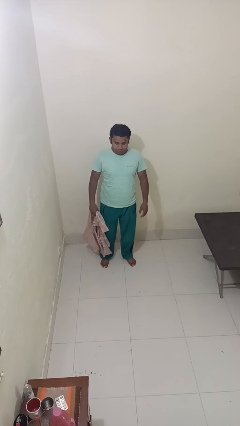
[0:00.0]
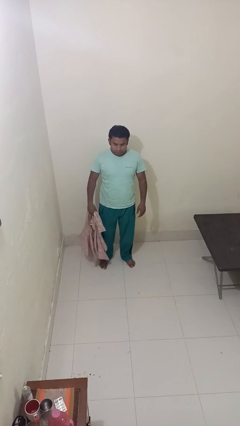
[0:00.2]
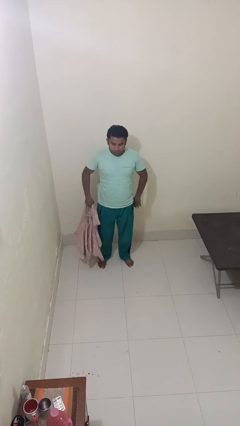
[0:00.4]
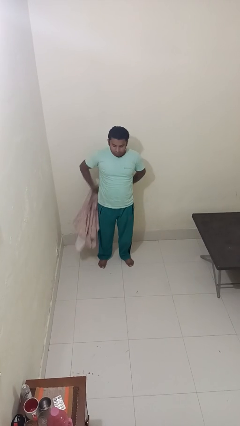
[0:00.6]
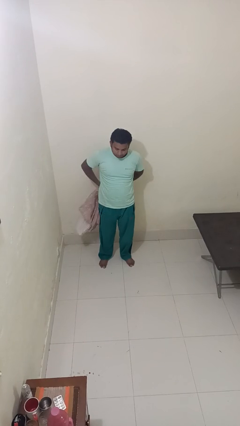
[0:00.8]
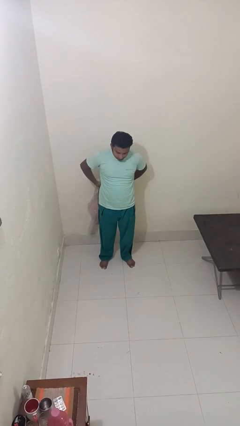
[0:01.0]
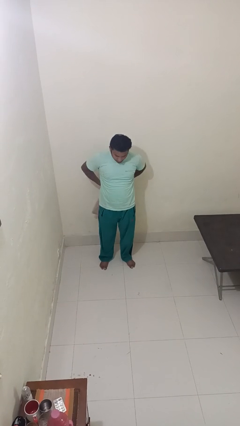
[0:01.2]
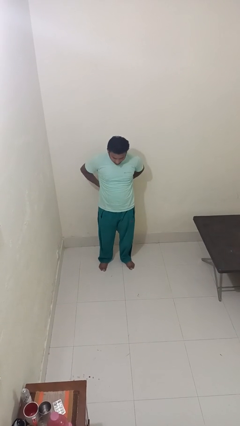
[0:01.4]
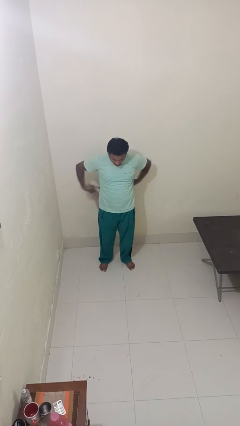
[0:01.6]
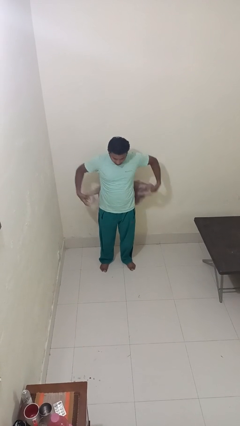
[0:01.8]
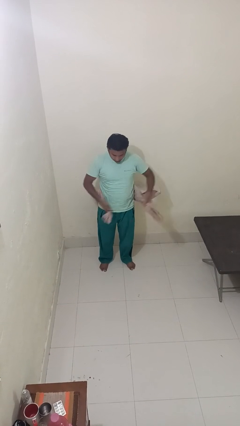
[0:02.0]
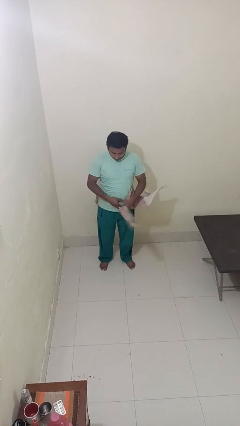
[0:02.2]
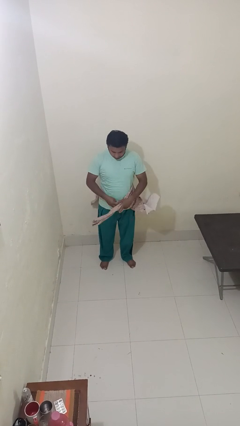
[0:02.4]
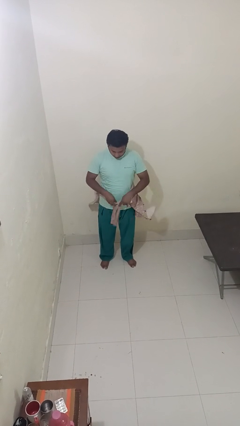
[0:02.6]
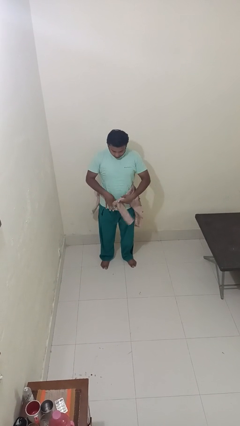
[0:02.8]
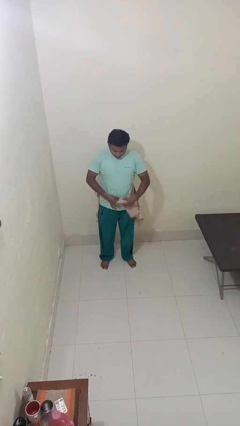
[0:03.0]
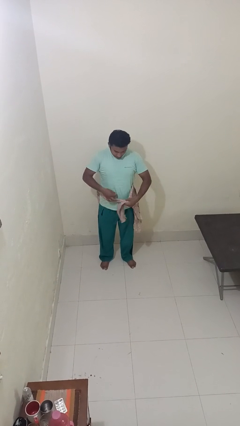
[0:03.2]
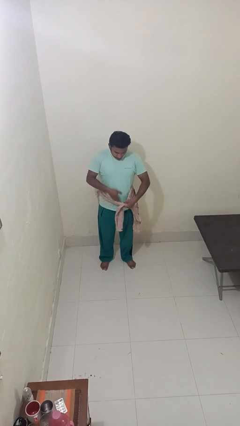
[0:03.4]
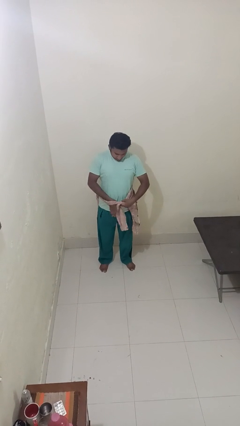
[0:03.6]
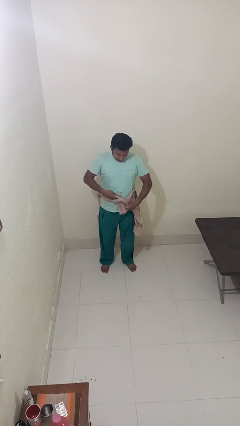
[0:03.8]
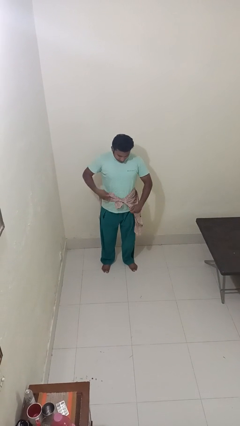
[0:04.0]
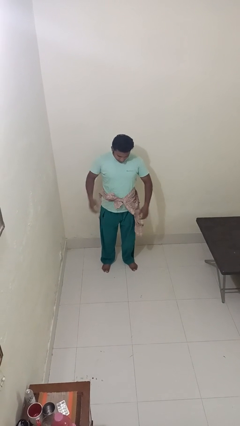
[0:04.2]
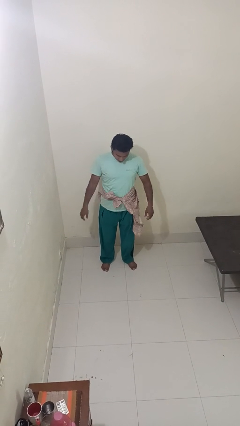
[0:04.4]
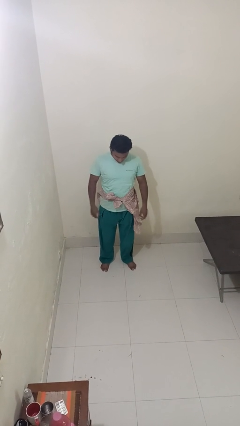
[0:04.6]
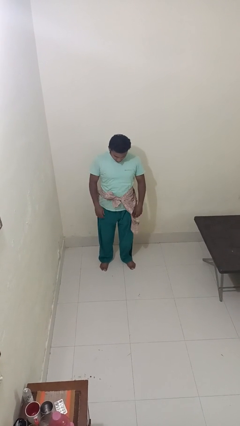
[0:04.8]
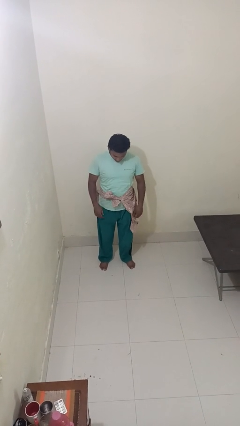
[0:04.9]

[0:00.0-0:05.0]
person ties jacket around waist

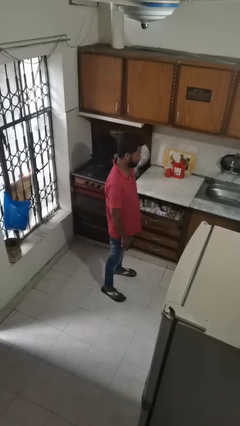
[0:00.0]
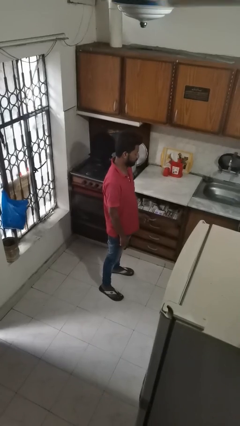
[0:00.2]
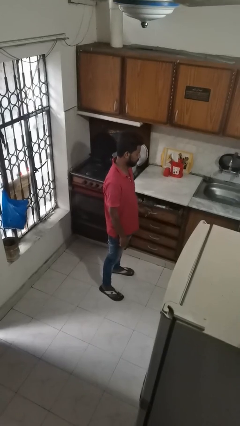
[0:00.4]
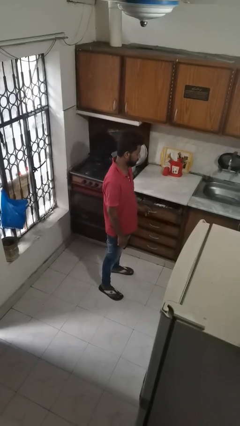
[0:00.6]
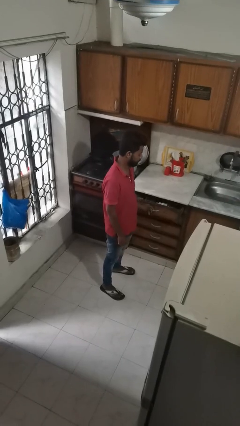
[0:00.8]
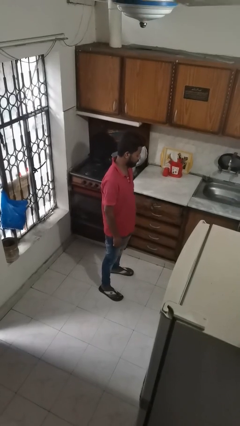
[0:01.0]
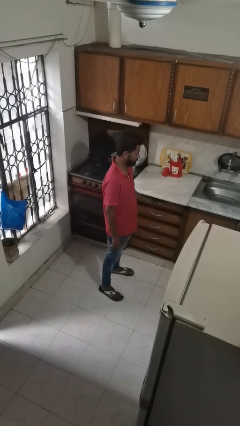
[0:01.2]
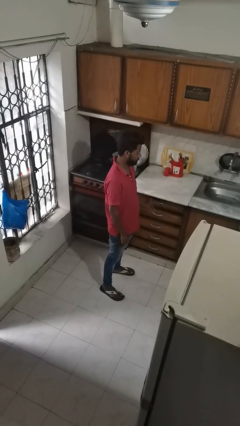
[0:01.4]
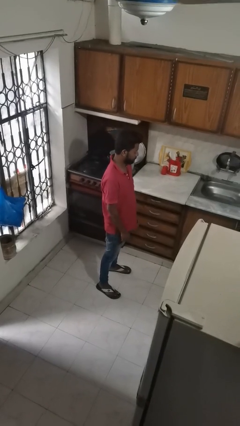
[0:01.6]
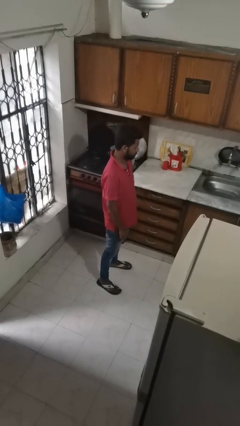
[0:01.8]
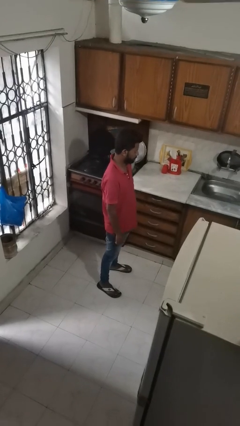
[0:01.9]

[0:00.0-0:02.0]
person closes kitchen drawer

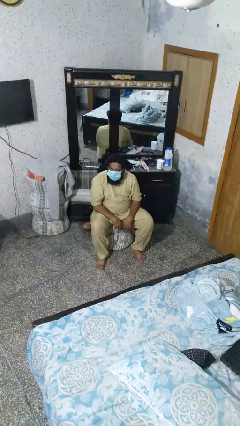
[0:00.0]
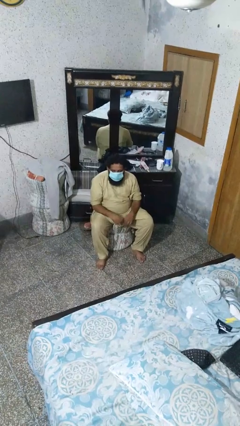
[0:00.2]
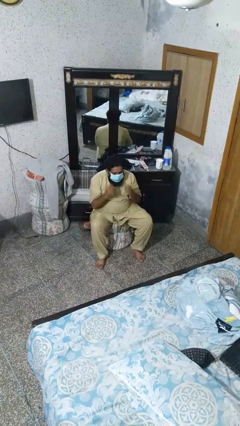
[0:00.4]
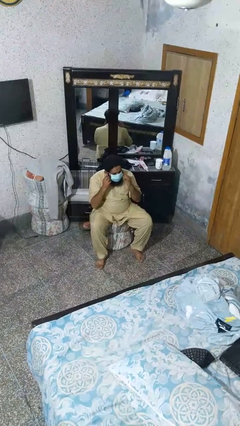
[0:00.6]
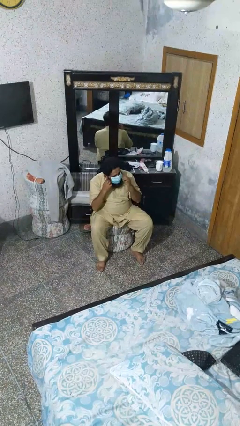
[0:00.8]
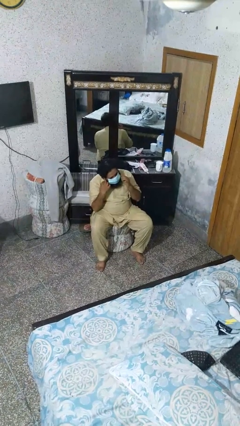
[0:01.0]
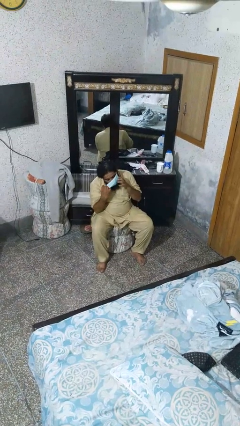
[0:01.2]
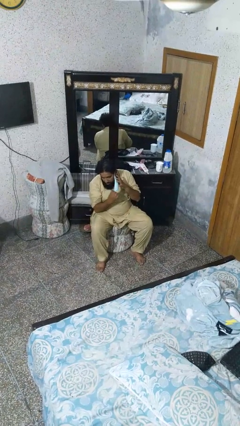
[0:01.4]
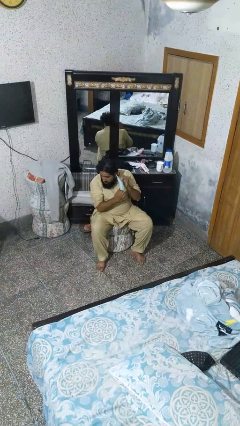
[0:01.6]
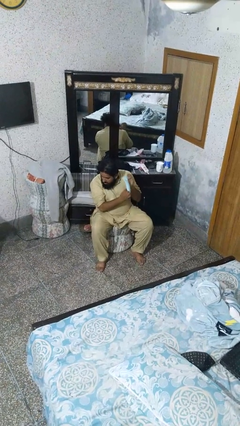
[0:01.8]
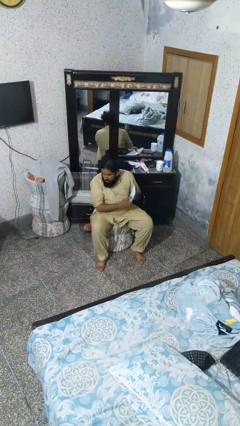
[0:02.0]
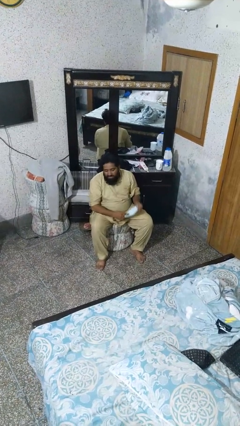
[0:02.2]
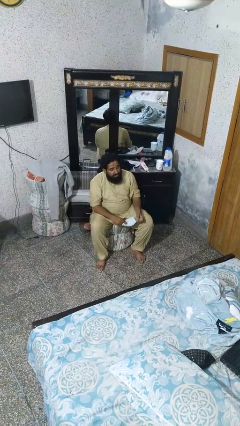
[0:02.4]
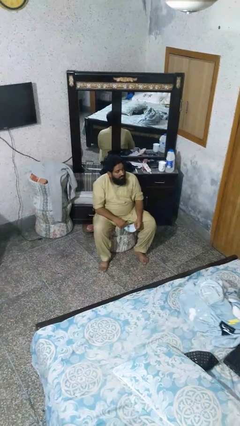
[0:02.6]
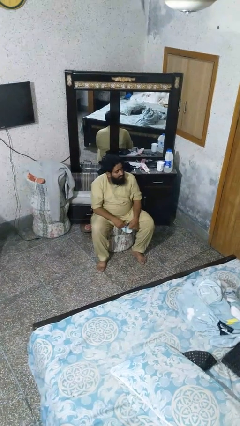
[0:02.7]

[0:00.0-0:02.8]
person takes off facemask

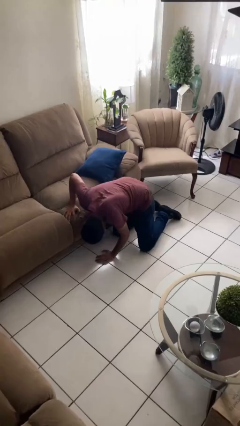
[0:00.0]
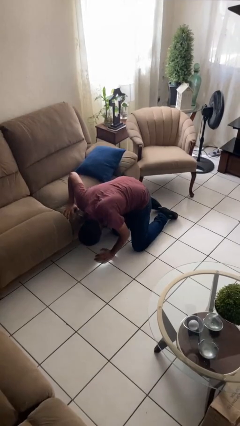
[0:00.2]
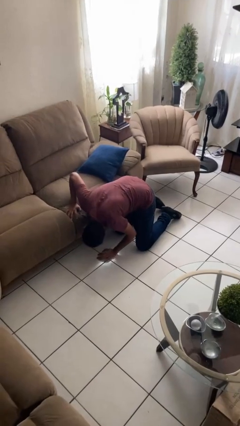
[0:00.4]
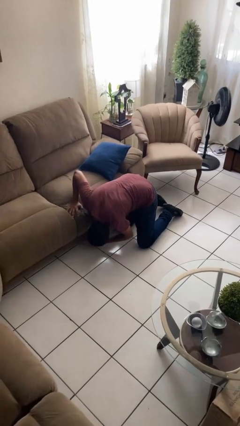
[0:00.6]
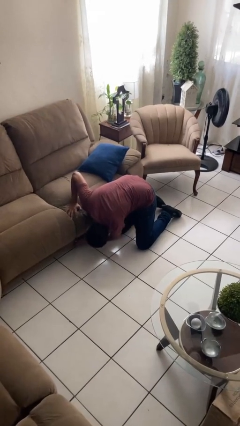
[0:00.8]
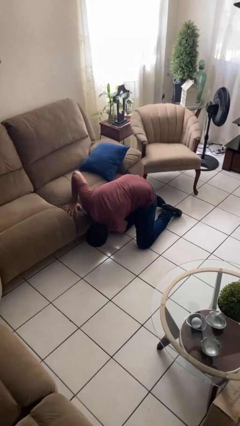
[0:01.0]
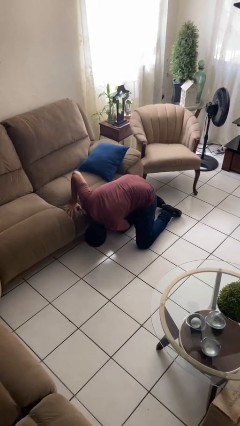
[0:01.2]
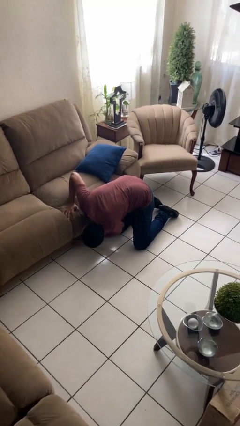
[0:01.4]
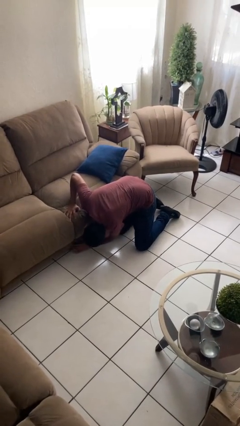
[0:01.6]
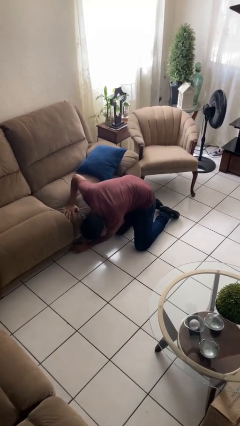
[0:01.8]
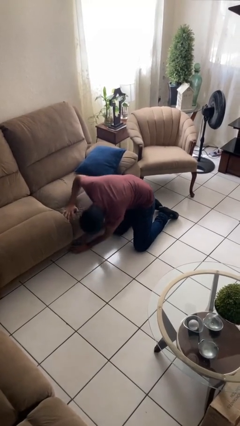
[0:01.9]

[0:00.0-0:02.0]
person searches under couch

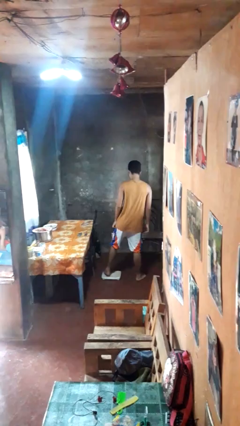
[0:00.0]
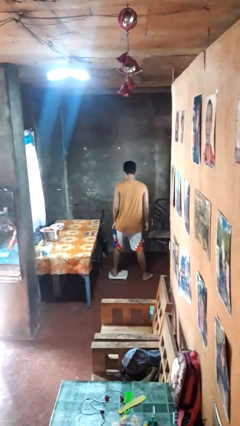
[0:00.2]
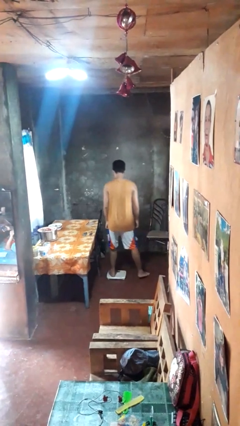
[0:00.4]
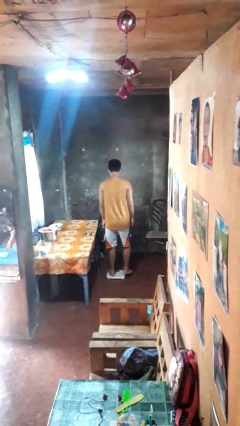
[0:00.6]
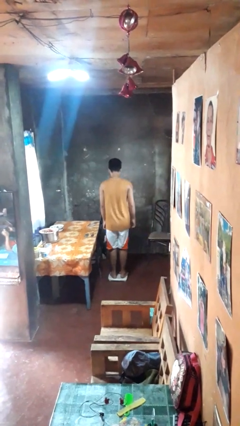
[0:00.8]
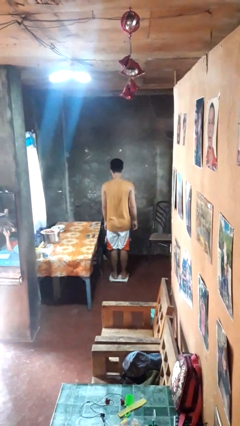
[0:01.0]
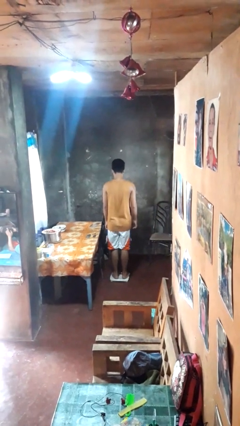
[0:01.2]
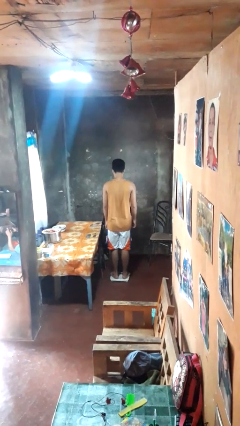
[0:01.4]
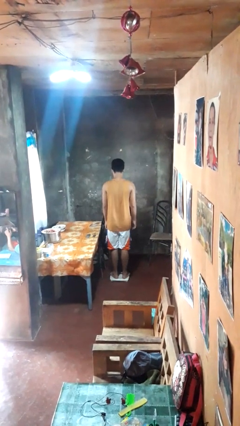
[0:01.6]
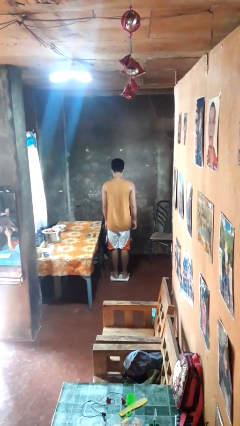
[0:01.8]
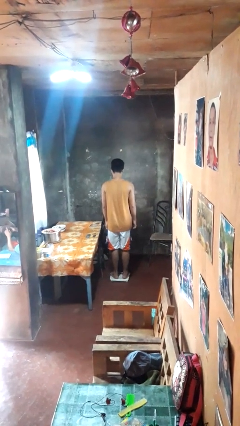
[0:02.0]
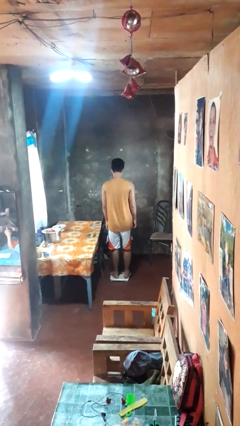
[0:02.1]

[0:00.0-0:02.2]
person uses bodyweight scale

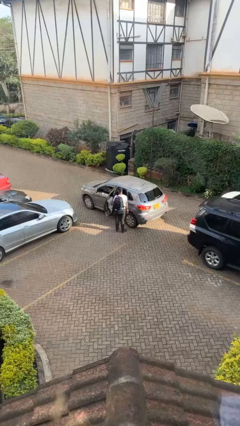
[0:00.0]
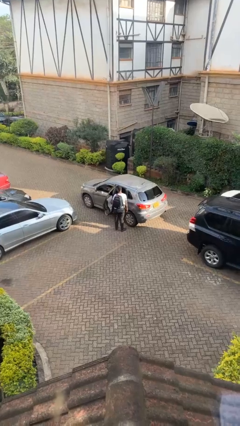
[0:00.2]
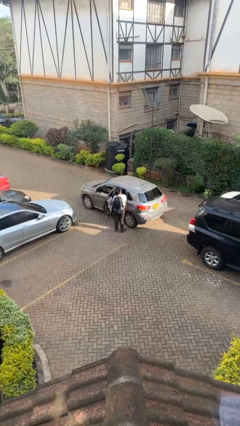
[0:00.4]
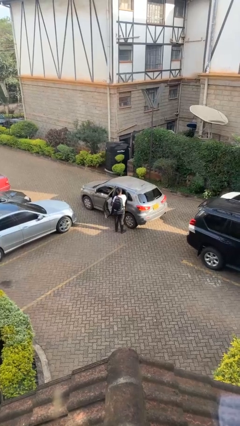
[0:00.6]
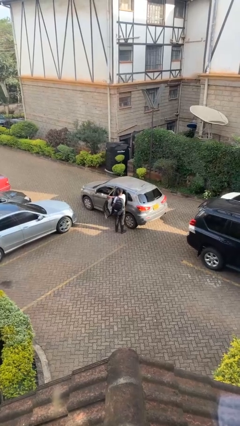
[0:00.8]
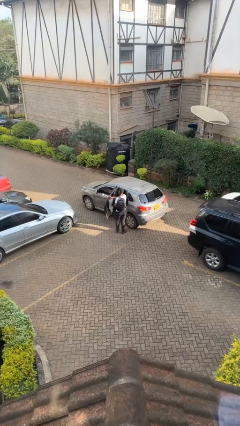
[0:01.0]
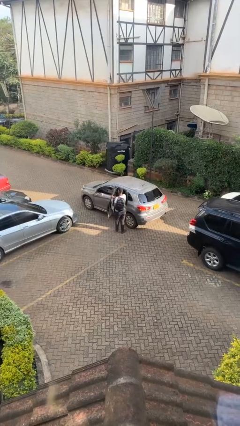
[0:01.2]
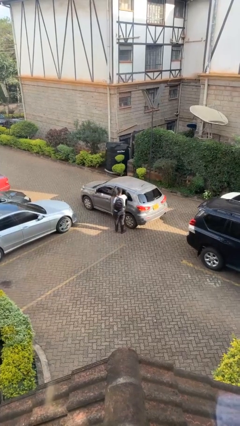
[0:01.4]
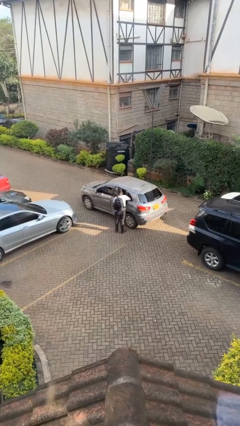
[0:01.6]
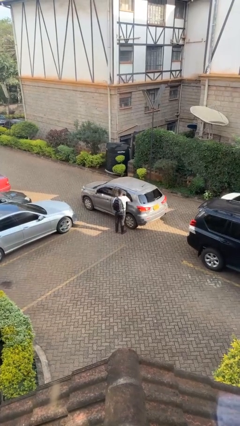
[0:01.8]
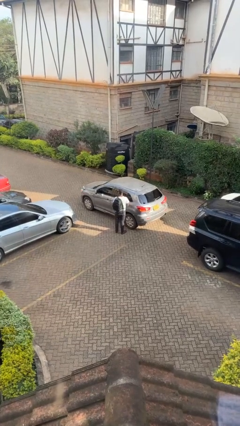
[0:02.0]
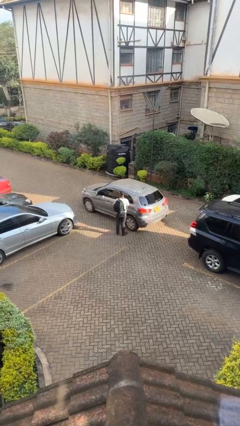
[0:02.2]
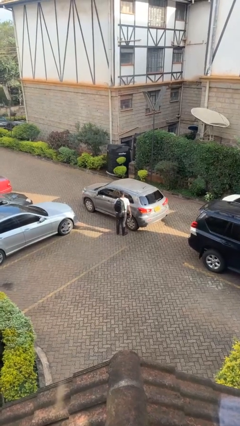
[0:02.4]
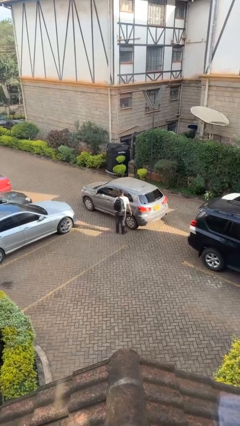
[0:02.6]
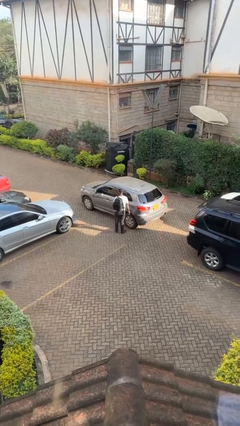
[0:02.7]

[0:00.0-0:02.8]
person closes car door

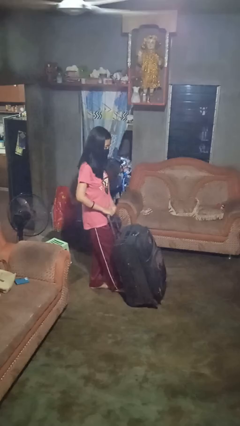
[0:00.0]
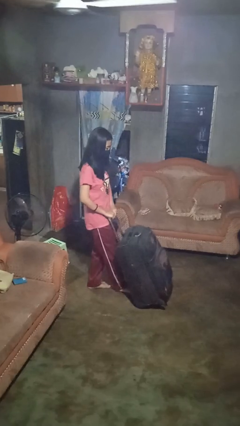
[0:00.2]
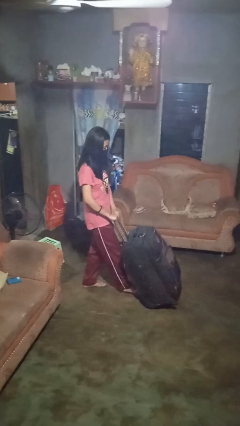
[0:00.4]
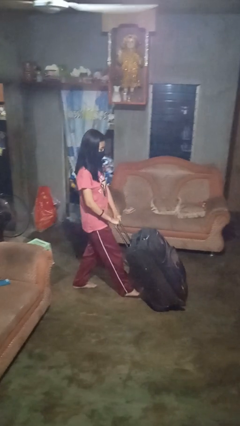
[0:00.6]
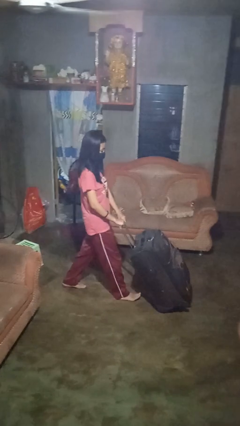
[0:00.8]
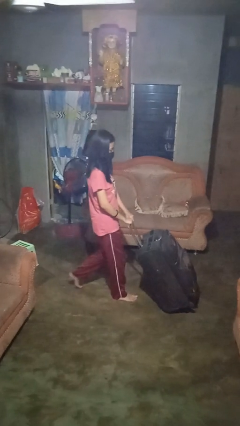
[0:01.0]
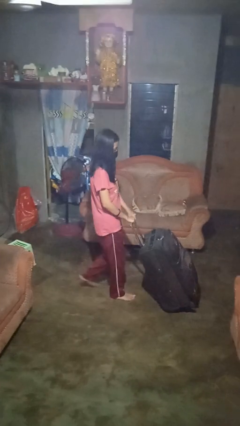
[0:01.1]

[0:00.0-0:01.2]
person pushes wheeled cart
